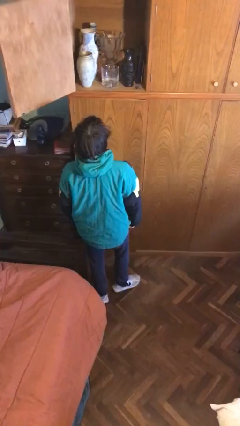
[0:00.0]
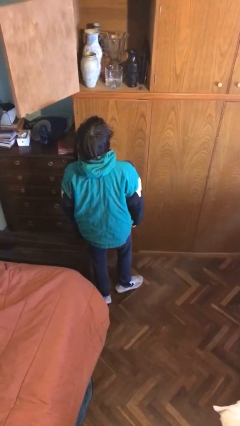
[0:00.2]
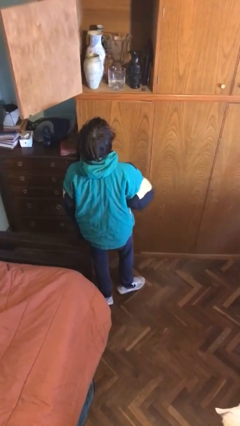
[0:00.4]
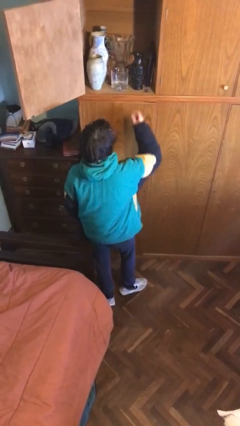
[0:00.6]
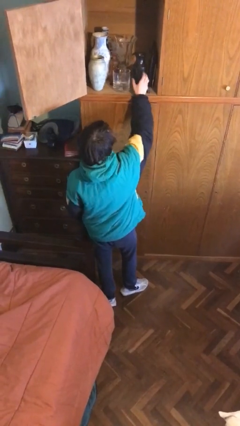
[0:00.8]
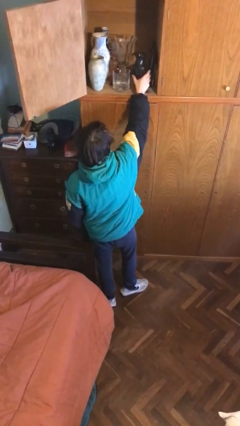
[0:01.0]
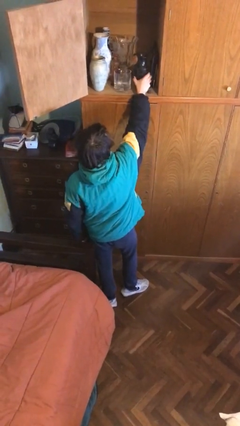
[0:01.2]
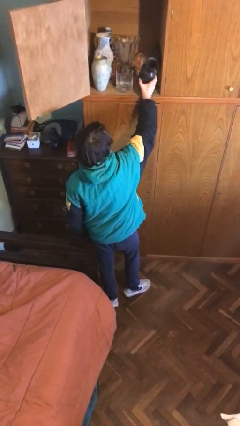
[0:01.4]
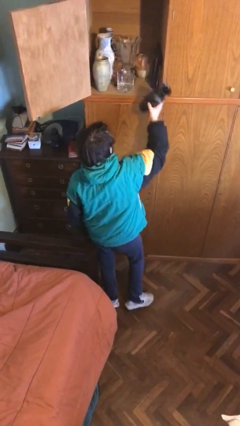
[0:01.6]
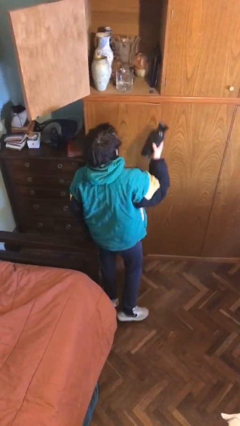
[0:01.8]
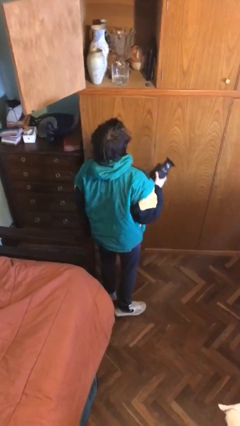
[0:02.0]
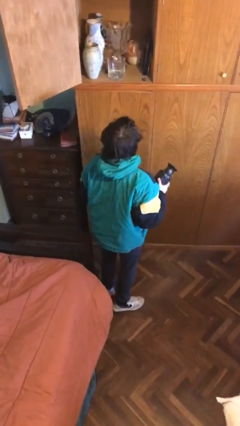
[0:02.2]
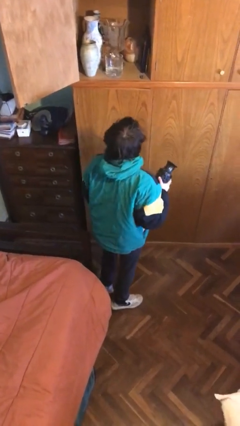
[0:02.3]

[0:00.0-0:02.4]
person picks up object from cabinet

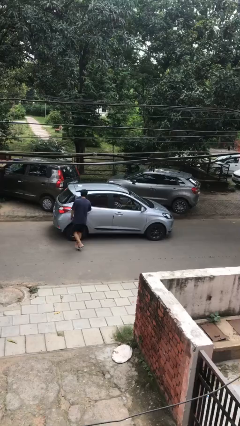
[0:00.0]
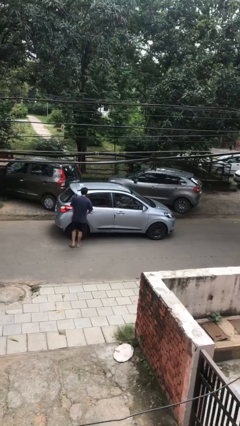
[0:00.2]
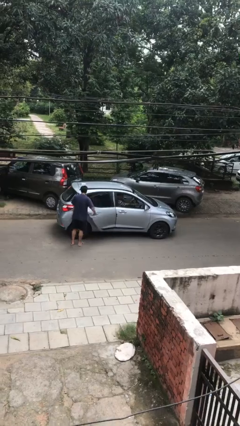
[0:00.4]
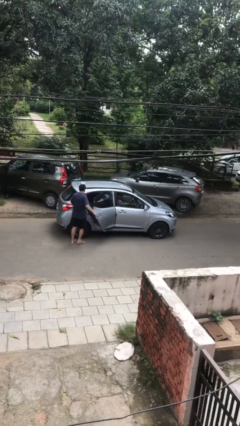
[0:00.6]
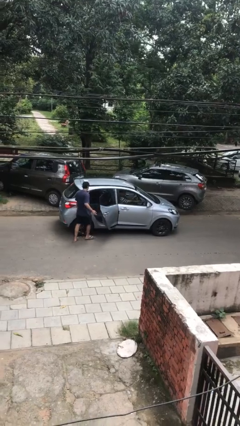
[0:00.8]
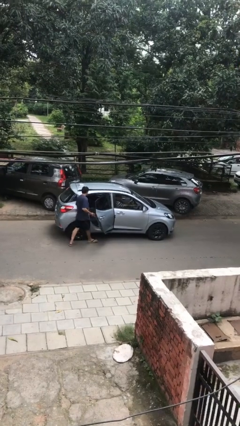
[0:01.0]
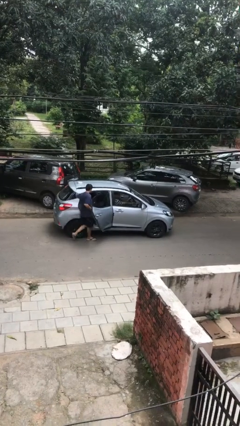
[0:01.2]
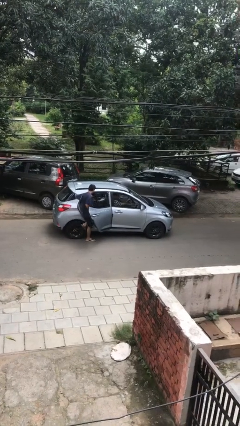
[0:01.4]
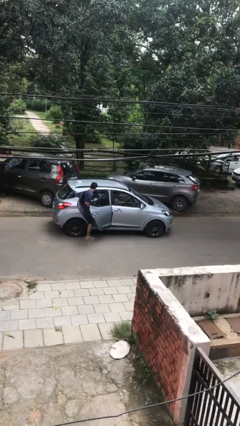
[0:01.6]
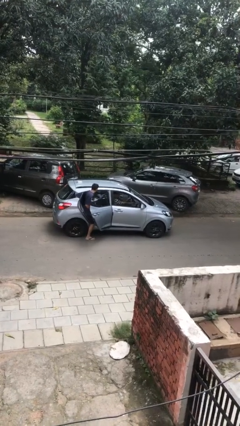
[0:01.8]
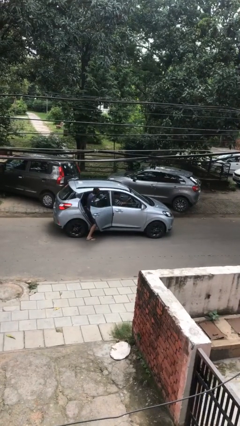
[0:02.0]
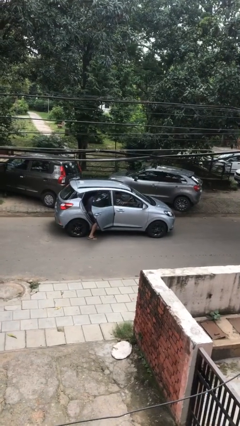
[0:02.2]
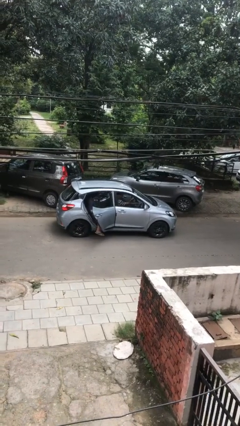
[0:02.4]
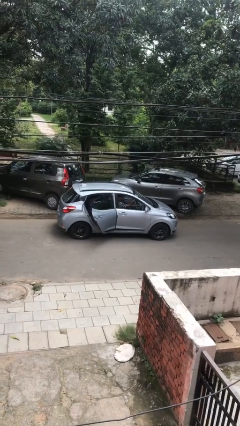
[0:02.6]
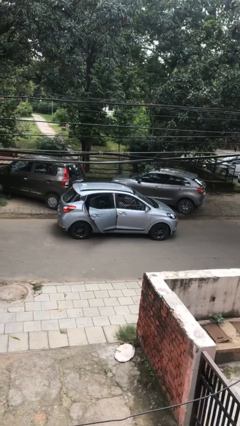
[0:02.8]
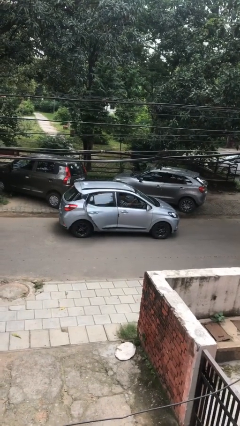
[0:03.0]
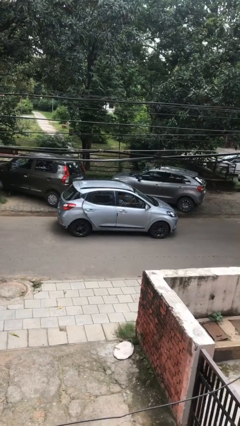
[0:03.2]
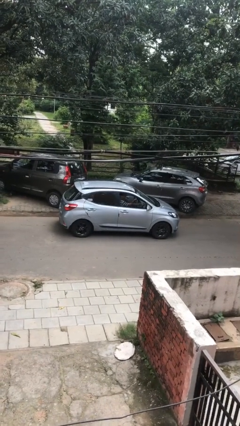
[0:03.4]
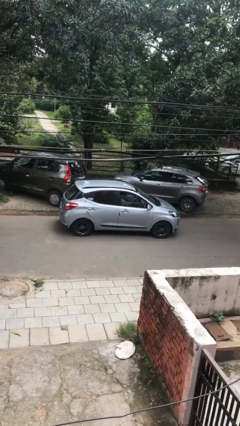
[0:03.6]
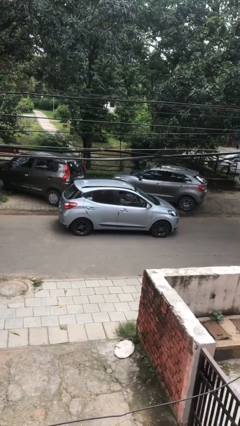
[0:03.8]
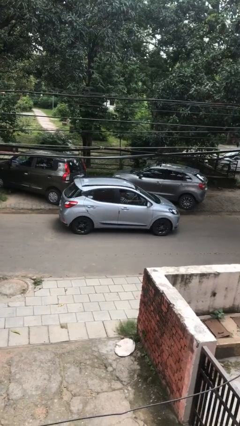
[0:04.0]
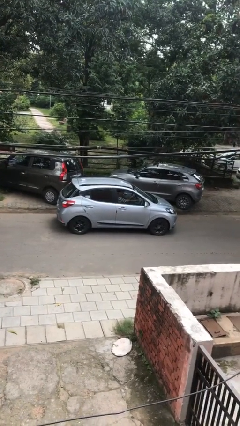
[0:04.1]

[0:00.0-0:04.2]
car picks up person

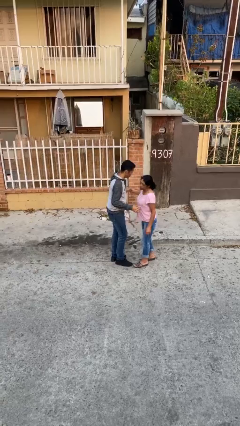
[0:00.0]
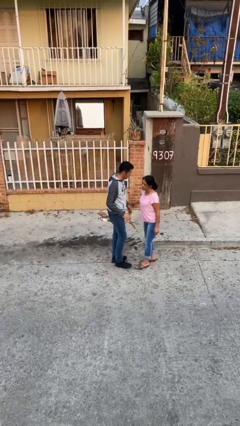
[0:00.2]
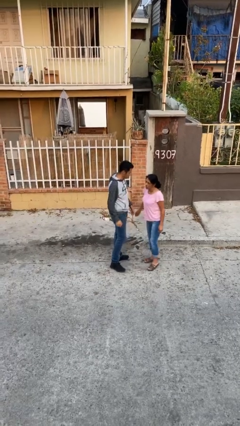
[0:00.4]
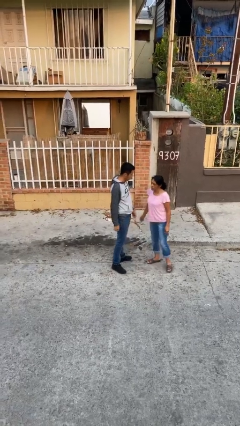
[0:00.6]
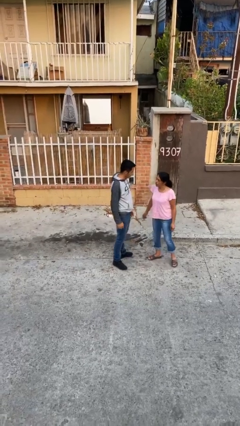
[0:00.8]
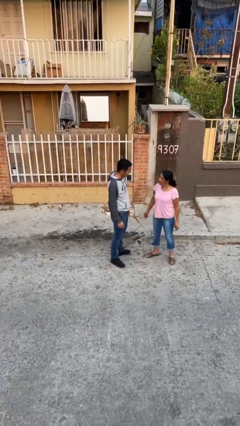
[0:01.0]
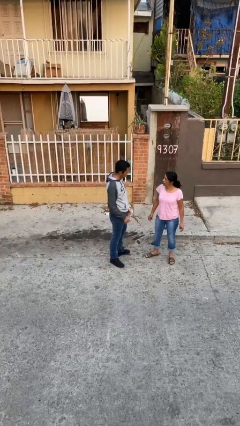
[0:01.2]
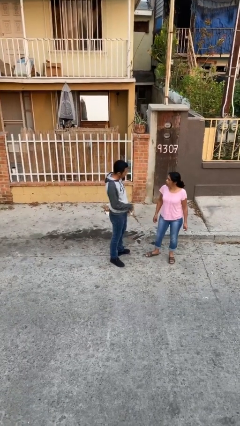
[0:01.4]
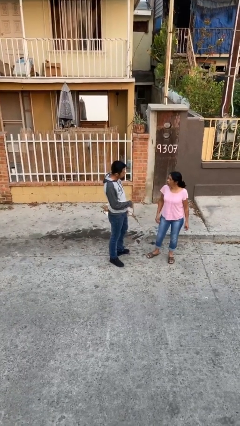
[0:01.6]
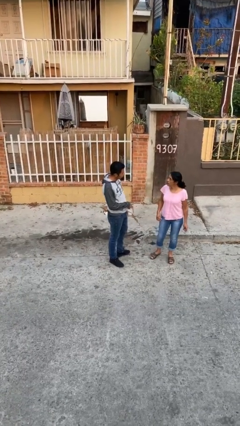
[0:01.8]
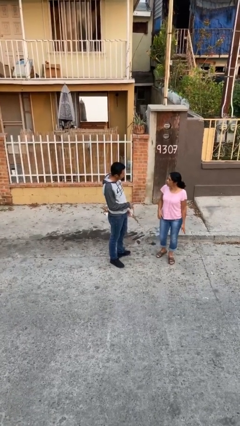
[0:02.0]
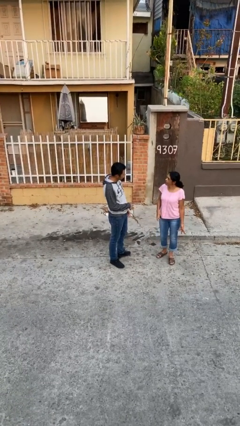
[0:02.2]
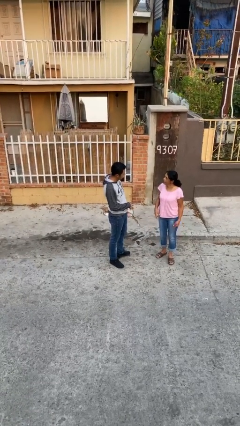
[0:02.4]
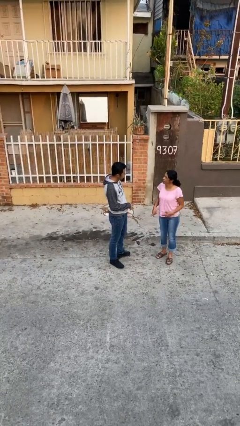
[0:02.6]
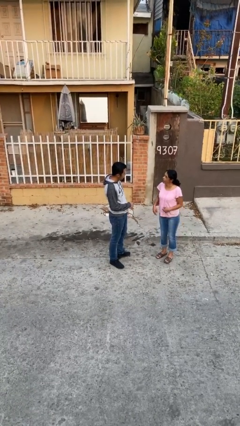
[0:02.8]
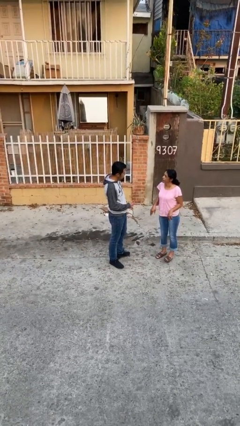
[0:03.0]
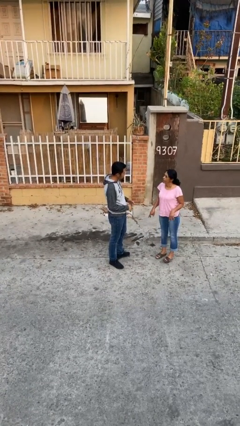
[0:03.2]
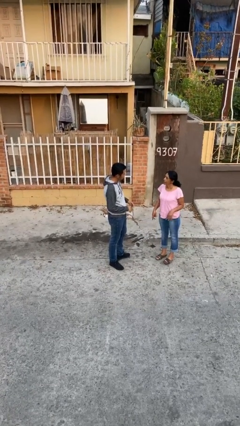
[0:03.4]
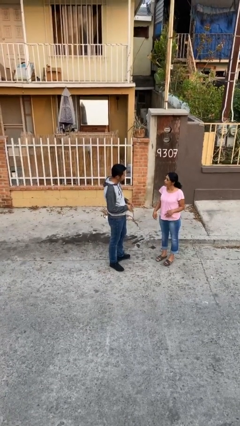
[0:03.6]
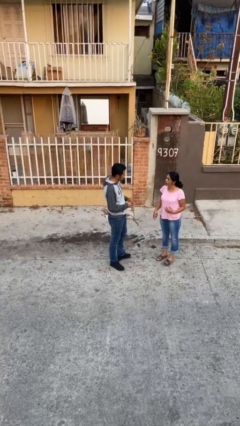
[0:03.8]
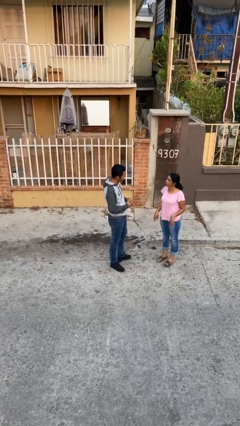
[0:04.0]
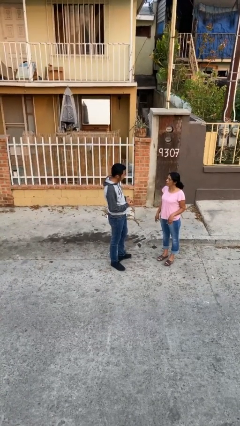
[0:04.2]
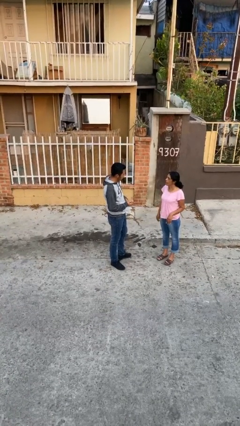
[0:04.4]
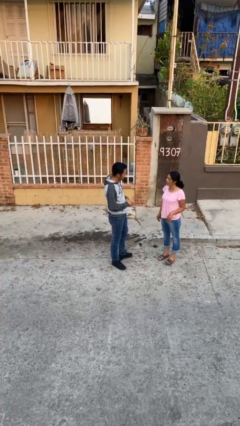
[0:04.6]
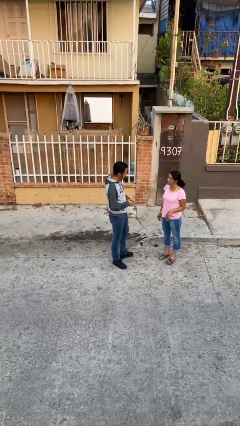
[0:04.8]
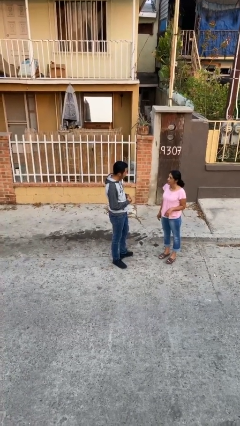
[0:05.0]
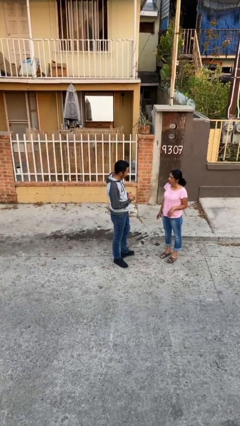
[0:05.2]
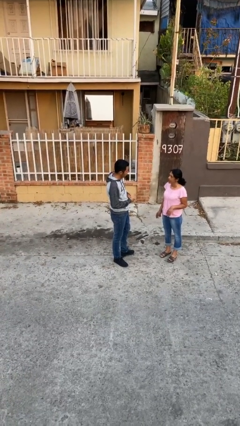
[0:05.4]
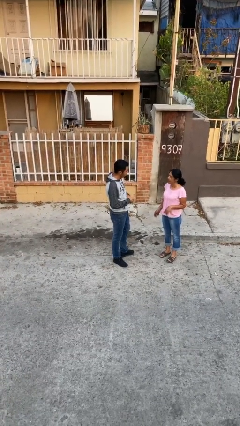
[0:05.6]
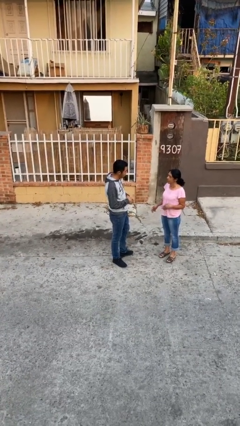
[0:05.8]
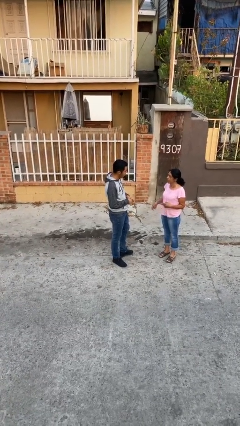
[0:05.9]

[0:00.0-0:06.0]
person talks to person

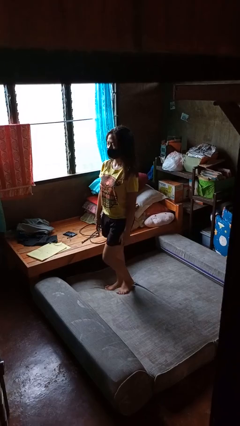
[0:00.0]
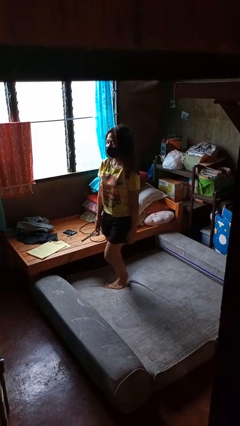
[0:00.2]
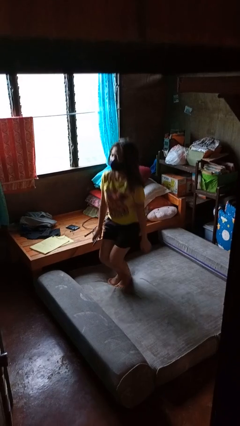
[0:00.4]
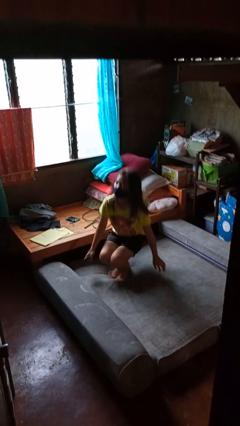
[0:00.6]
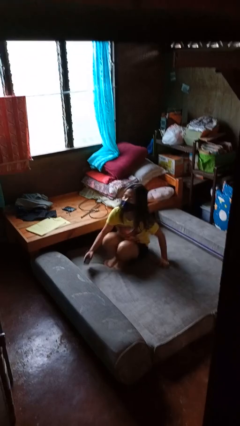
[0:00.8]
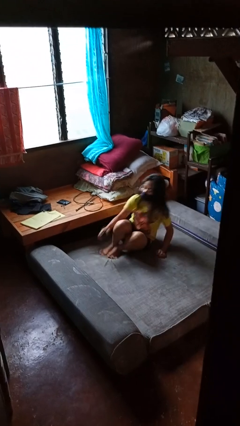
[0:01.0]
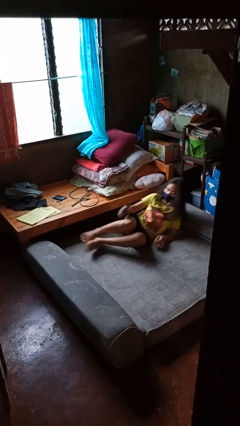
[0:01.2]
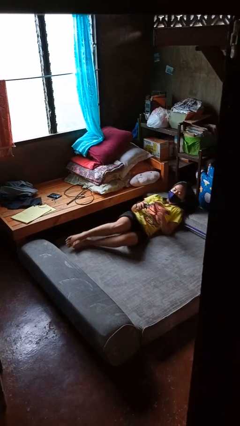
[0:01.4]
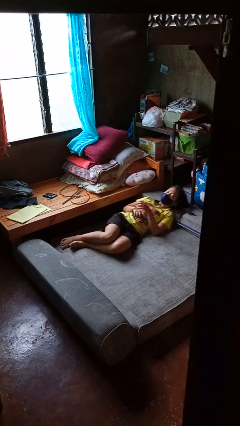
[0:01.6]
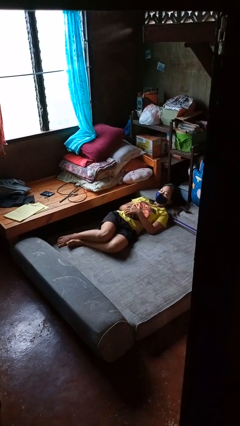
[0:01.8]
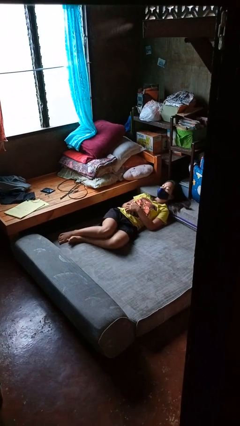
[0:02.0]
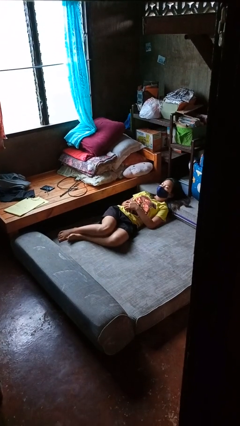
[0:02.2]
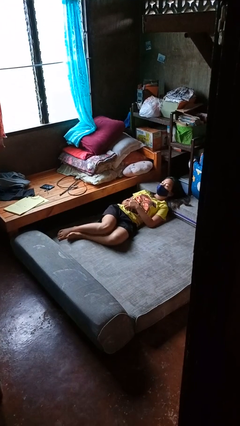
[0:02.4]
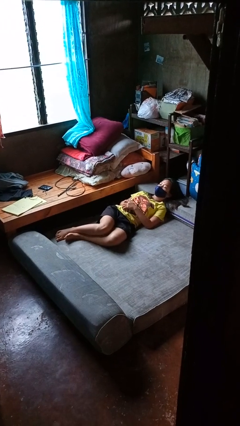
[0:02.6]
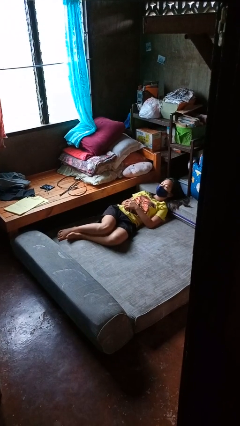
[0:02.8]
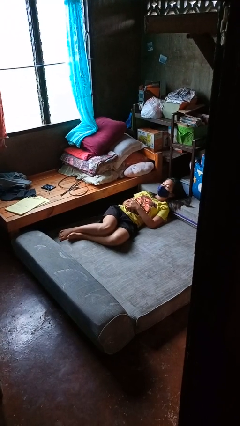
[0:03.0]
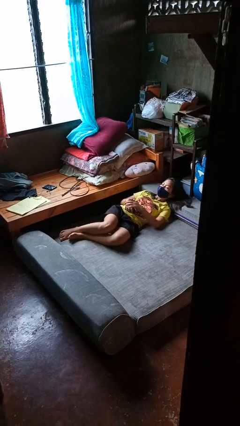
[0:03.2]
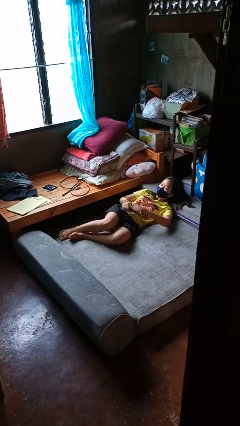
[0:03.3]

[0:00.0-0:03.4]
person lies down on bed

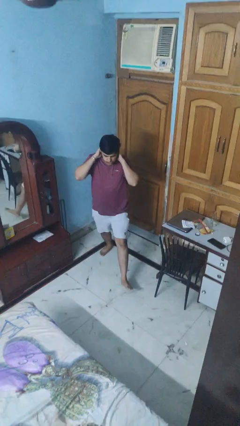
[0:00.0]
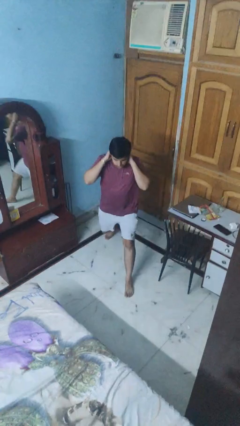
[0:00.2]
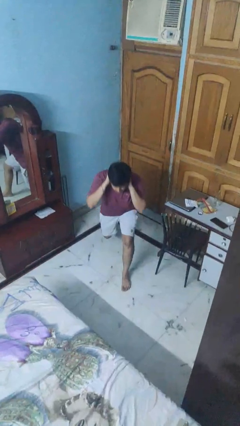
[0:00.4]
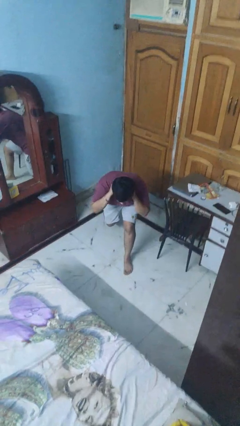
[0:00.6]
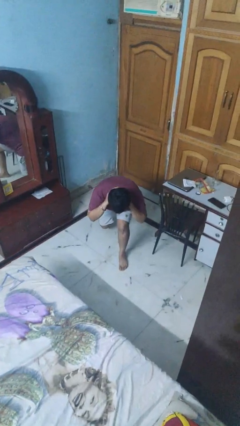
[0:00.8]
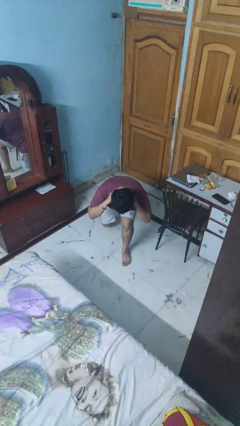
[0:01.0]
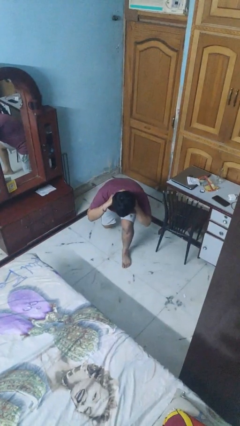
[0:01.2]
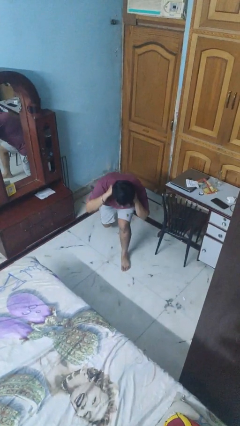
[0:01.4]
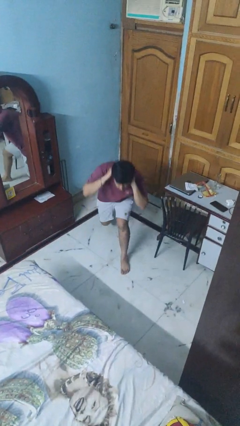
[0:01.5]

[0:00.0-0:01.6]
person exercises with lunges
